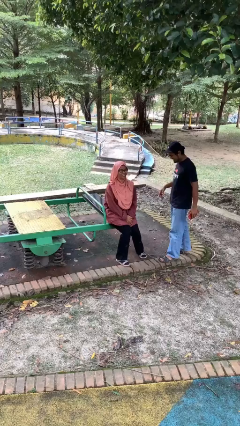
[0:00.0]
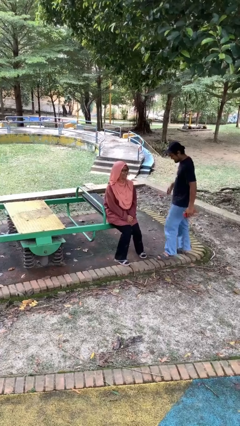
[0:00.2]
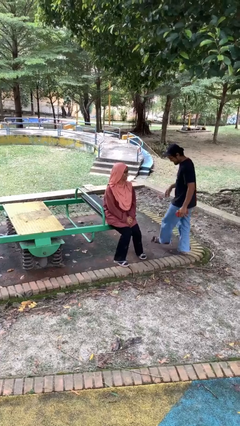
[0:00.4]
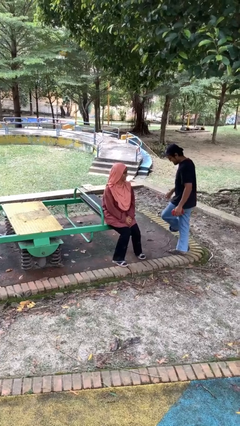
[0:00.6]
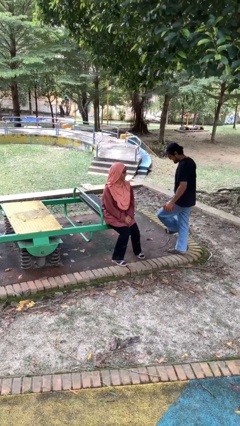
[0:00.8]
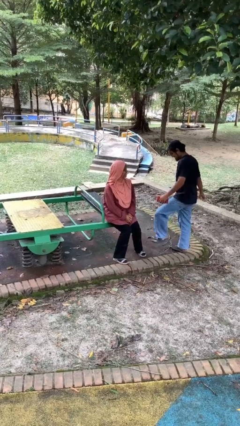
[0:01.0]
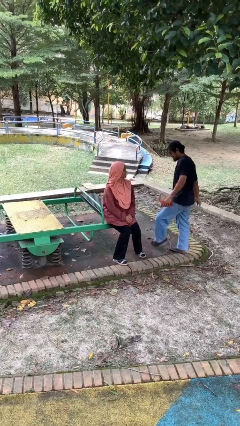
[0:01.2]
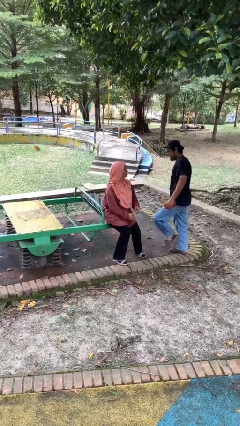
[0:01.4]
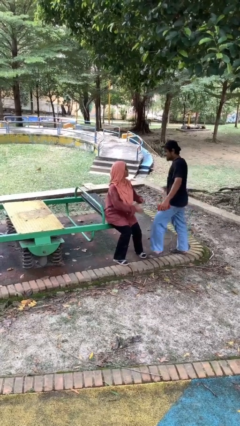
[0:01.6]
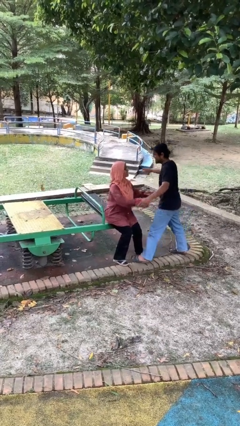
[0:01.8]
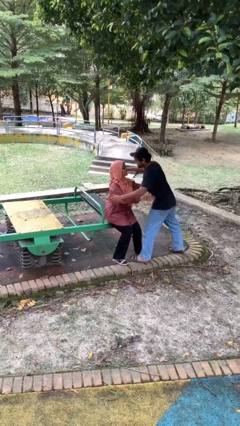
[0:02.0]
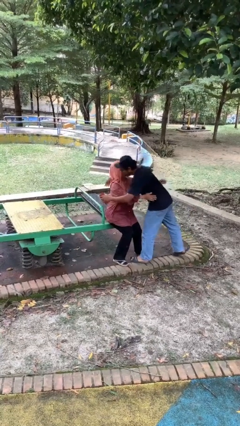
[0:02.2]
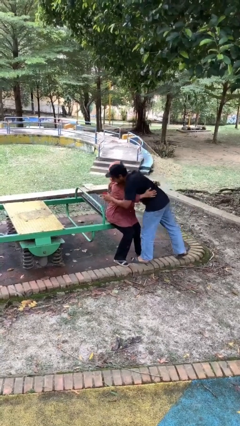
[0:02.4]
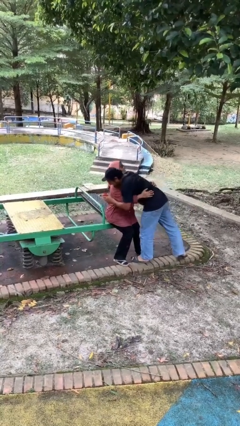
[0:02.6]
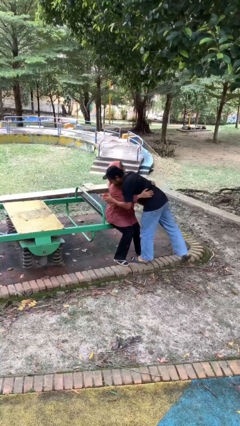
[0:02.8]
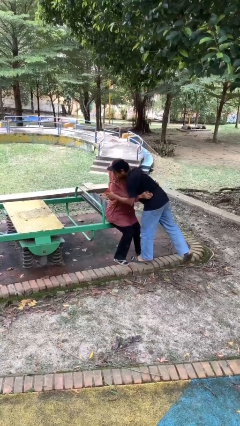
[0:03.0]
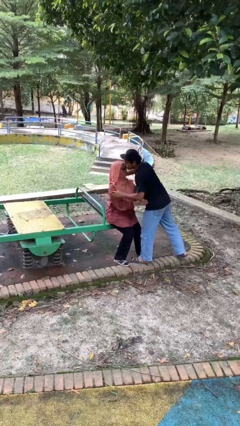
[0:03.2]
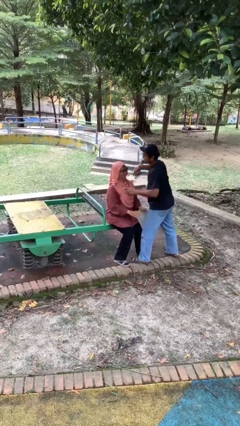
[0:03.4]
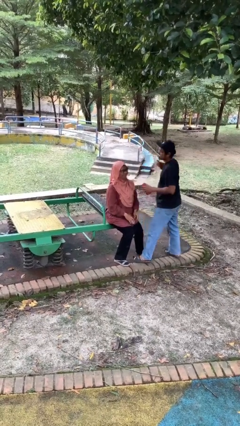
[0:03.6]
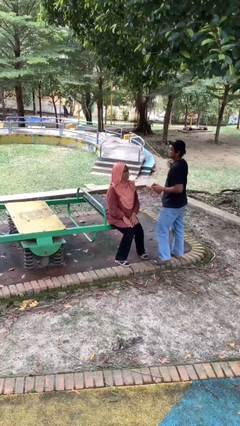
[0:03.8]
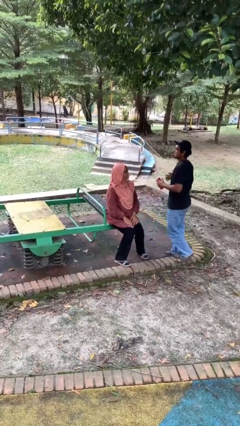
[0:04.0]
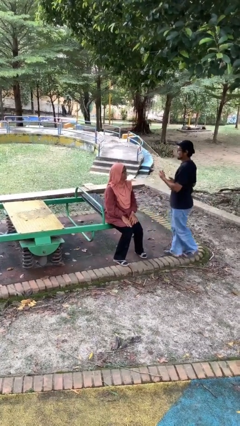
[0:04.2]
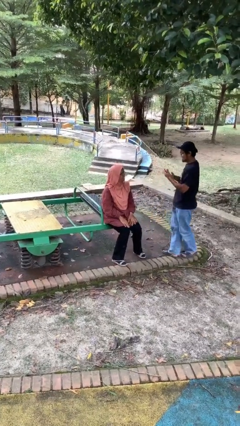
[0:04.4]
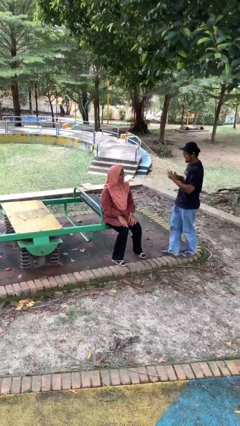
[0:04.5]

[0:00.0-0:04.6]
person embraces person

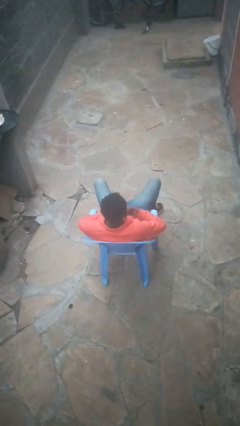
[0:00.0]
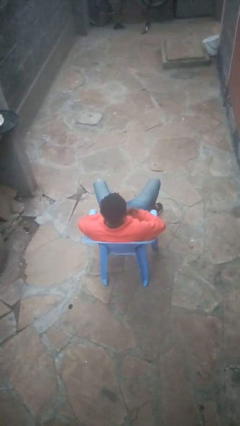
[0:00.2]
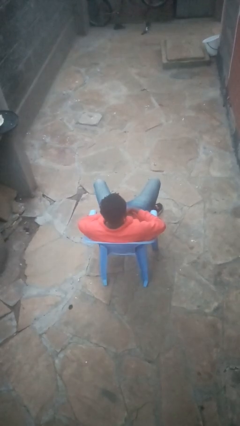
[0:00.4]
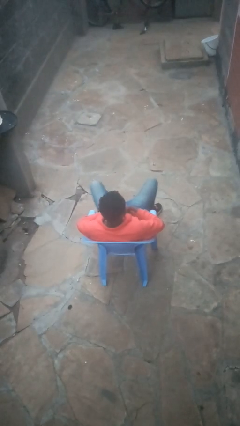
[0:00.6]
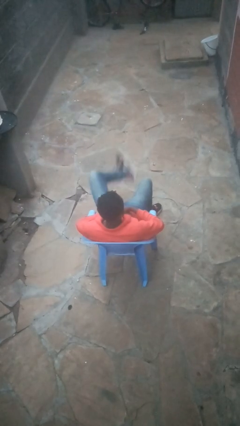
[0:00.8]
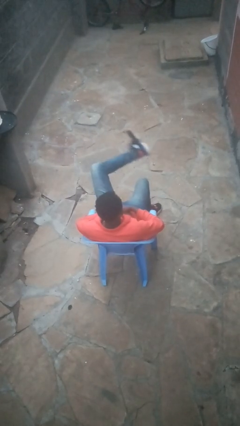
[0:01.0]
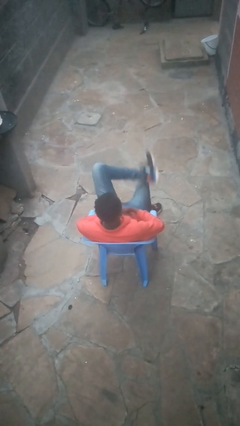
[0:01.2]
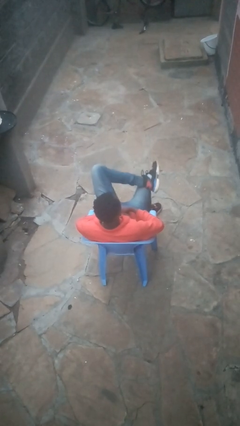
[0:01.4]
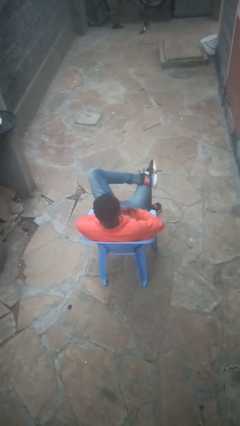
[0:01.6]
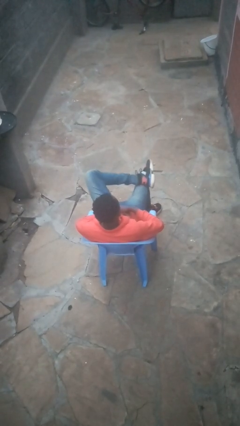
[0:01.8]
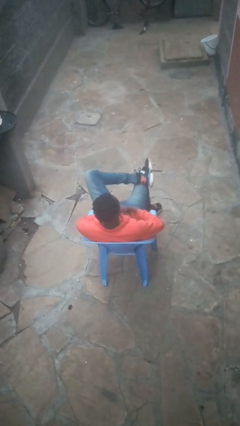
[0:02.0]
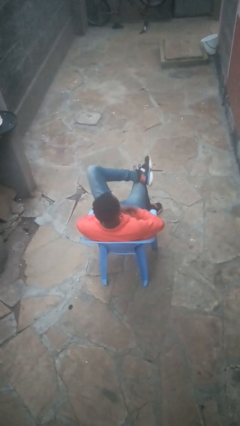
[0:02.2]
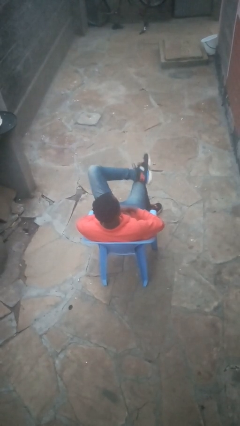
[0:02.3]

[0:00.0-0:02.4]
person crosses legs

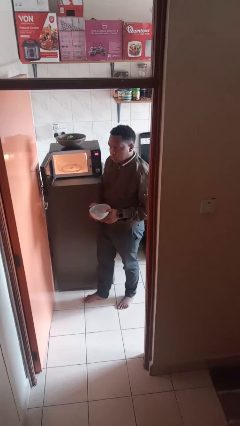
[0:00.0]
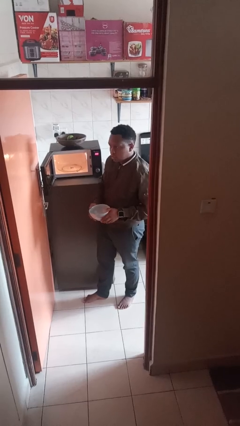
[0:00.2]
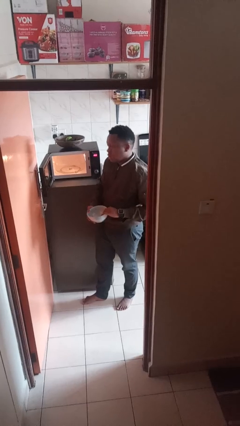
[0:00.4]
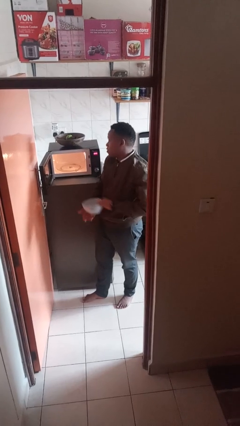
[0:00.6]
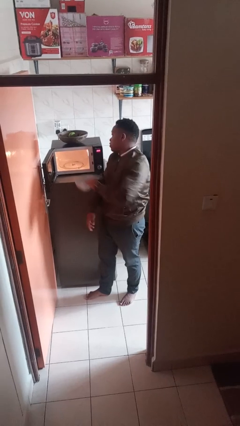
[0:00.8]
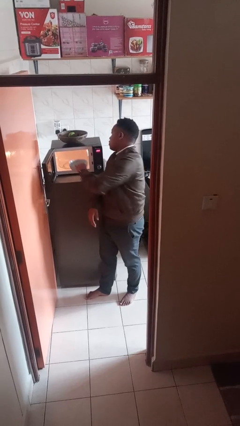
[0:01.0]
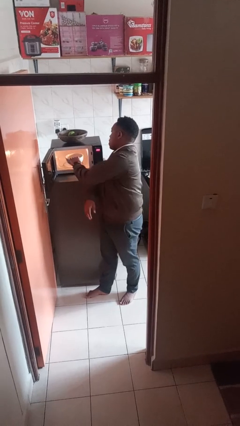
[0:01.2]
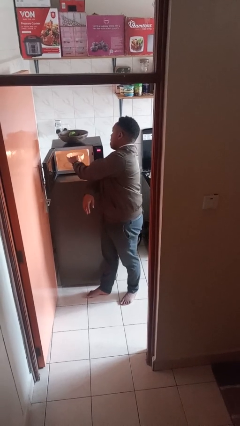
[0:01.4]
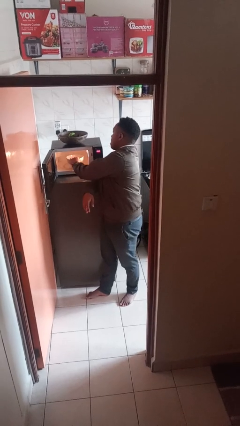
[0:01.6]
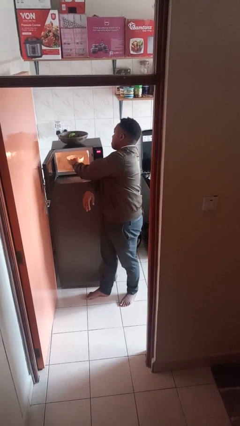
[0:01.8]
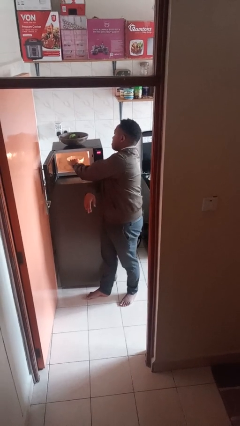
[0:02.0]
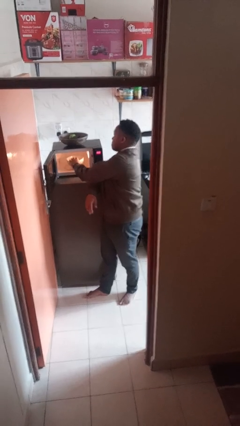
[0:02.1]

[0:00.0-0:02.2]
person puts object into microwave

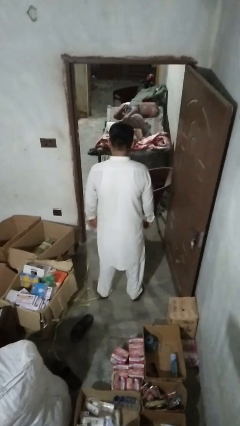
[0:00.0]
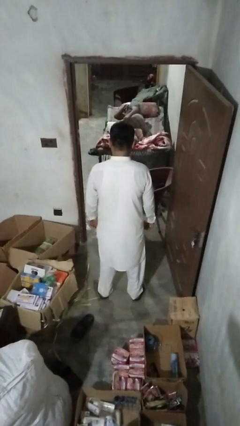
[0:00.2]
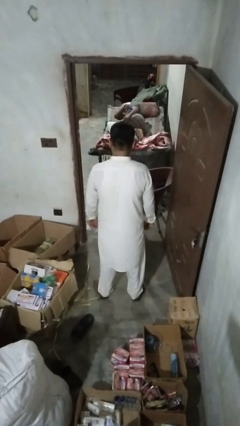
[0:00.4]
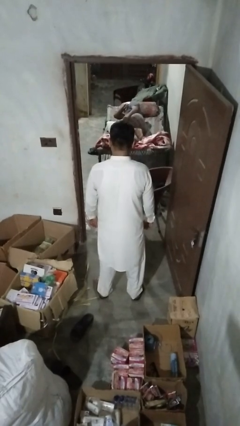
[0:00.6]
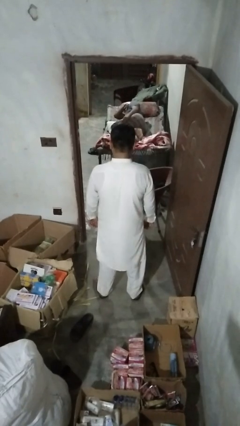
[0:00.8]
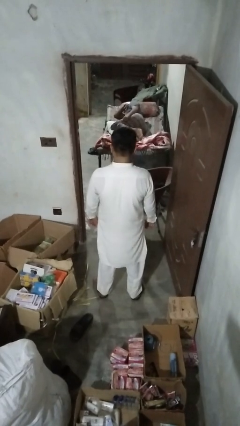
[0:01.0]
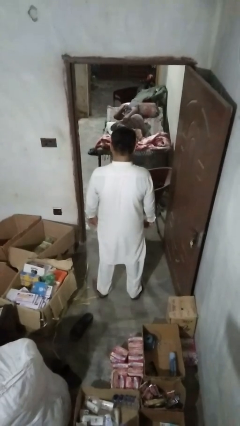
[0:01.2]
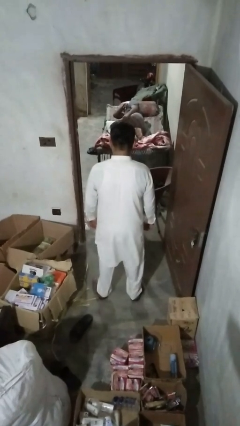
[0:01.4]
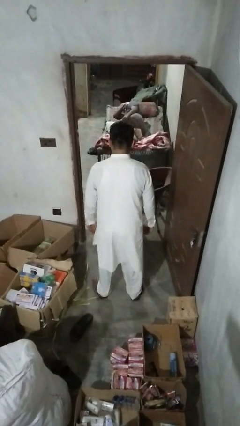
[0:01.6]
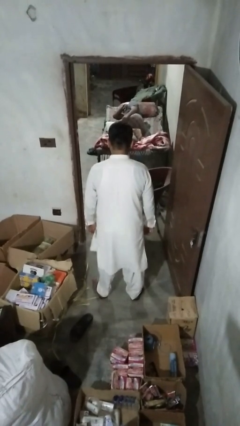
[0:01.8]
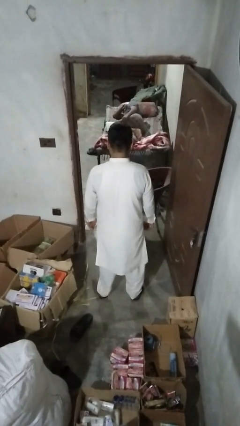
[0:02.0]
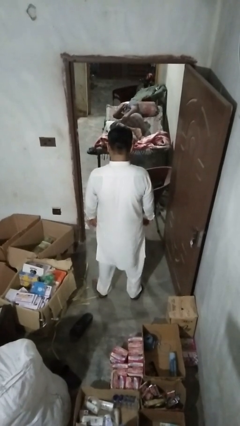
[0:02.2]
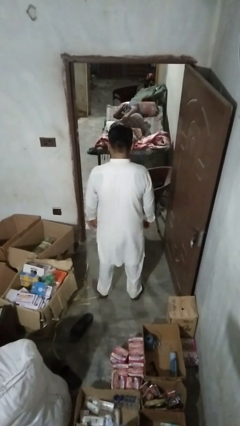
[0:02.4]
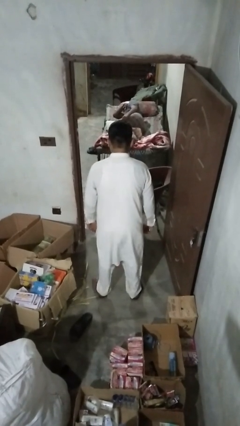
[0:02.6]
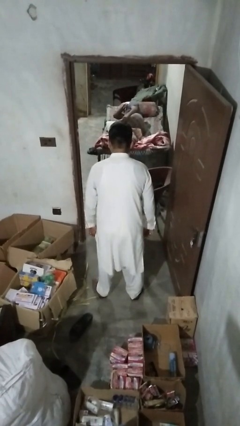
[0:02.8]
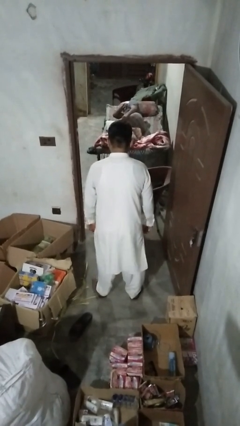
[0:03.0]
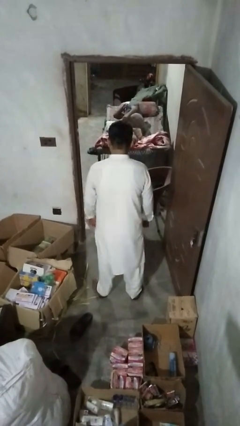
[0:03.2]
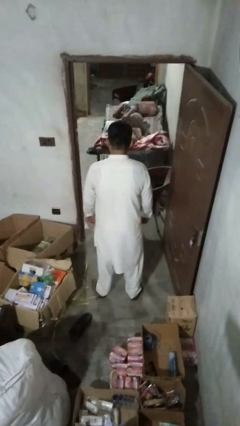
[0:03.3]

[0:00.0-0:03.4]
person wiggles hips

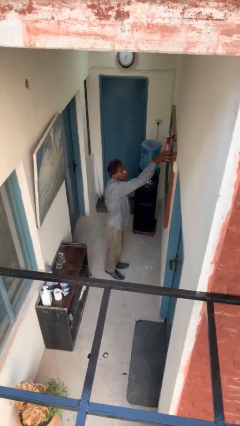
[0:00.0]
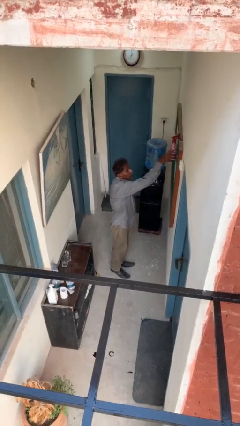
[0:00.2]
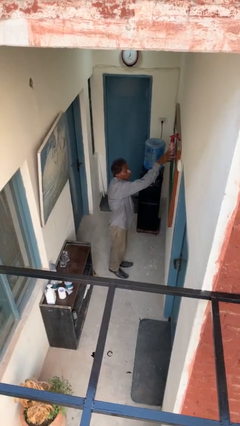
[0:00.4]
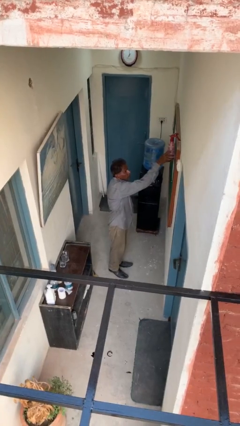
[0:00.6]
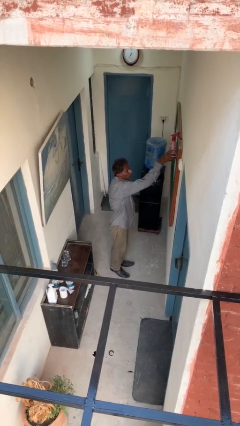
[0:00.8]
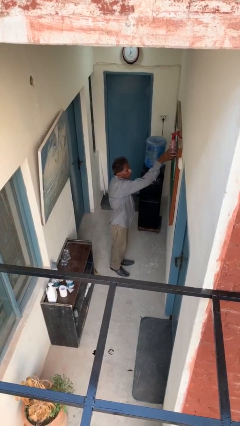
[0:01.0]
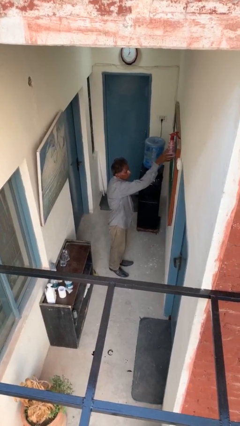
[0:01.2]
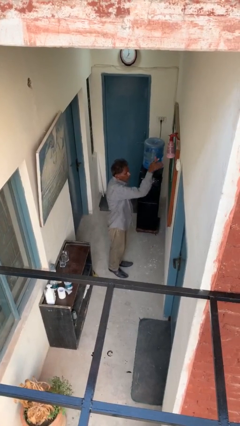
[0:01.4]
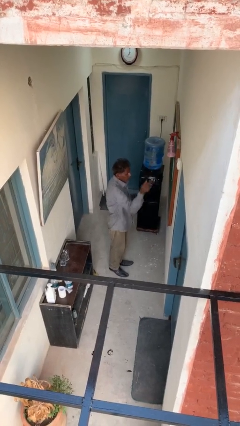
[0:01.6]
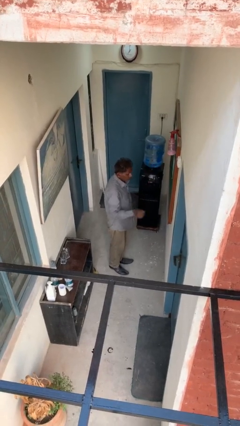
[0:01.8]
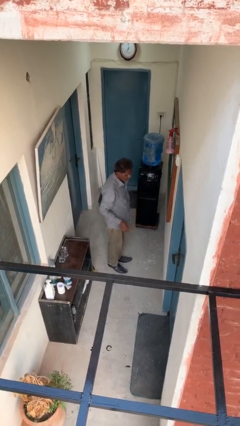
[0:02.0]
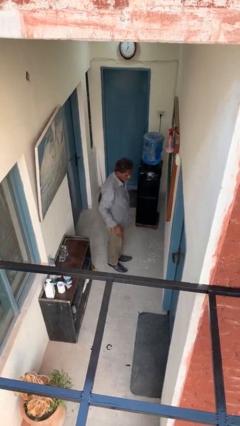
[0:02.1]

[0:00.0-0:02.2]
person puts down object on shelf

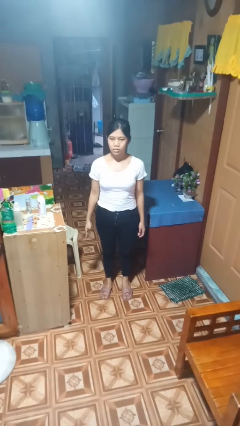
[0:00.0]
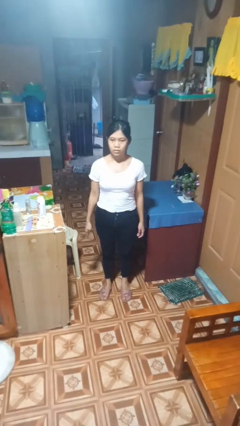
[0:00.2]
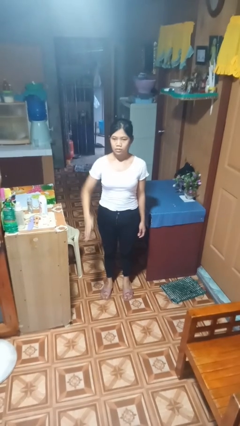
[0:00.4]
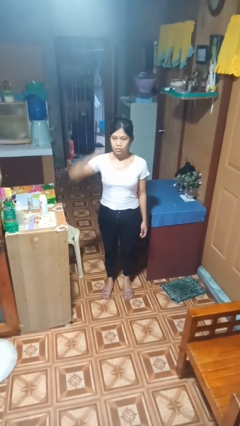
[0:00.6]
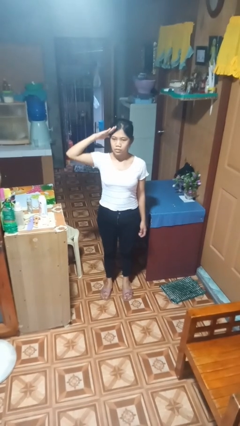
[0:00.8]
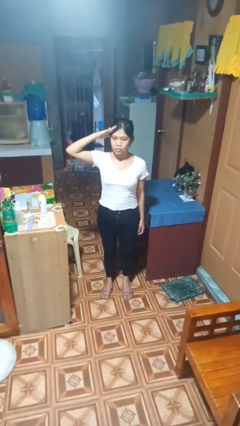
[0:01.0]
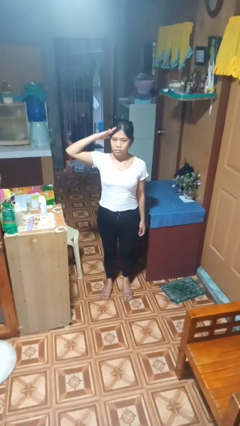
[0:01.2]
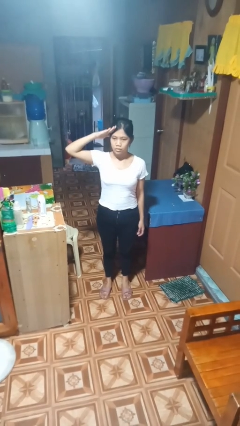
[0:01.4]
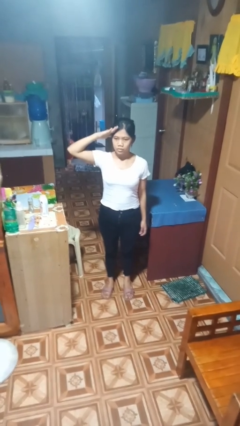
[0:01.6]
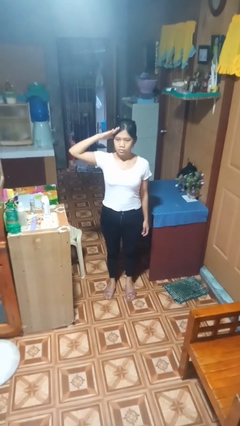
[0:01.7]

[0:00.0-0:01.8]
person salutes

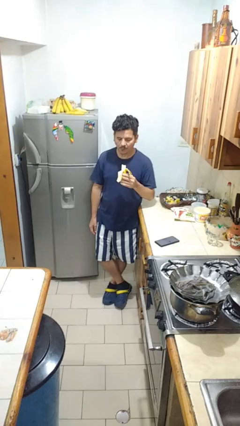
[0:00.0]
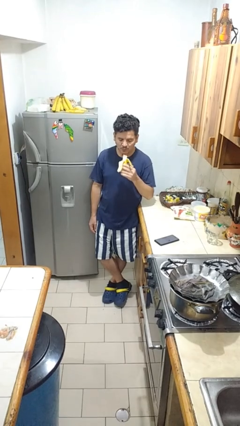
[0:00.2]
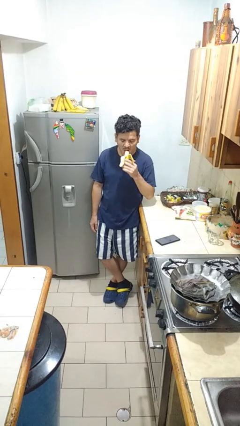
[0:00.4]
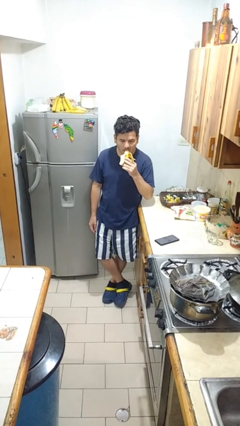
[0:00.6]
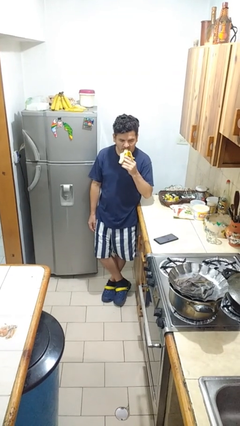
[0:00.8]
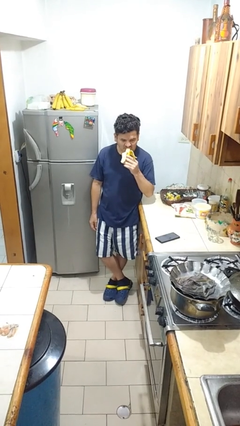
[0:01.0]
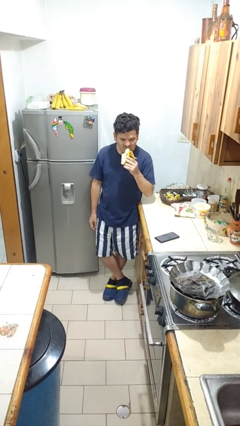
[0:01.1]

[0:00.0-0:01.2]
person eats banana
